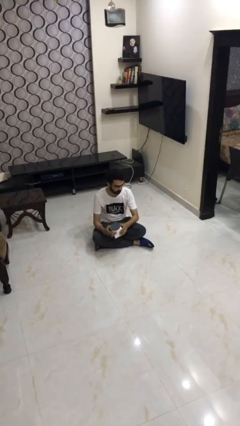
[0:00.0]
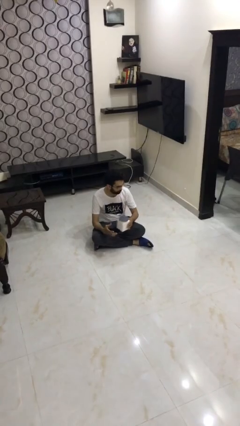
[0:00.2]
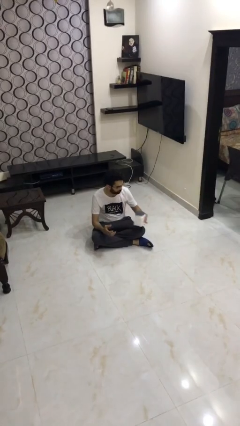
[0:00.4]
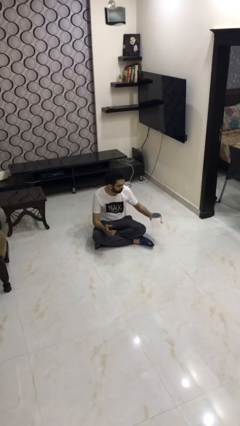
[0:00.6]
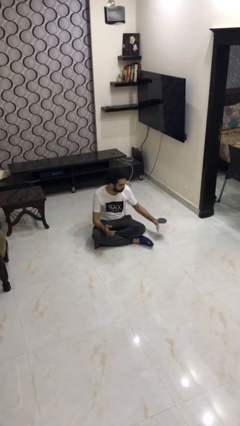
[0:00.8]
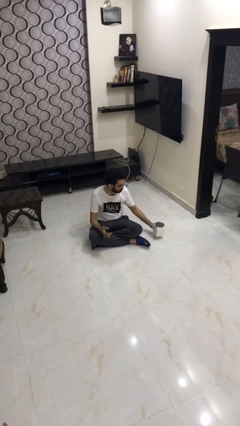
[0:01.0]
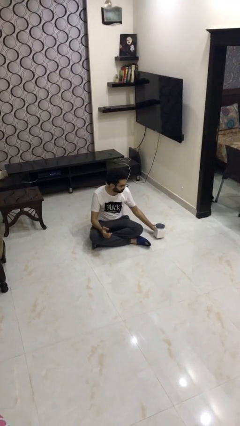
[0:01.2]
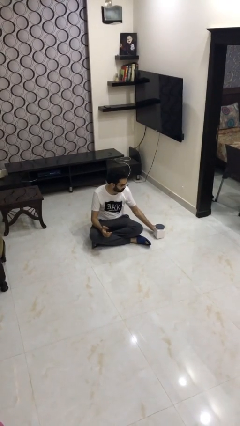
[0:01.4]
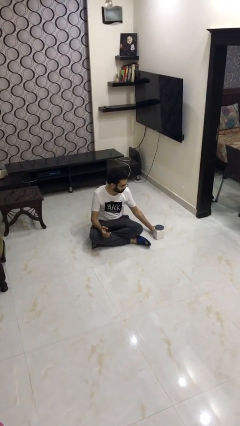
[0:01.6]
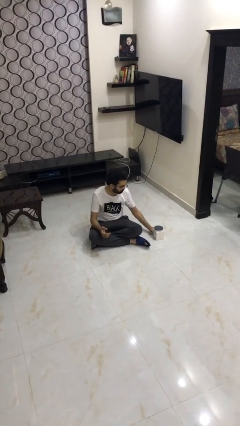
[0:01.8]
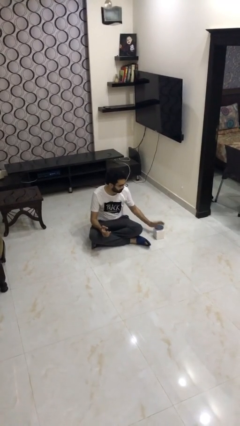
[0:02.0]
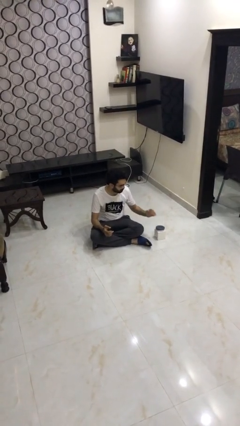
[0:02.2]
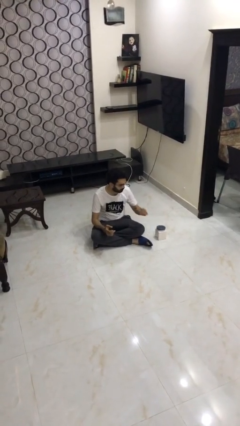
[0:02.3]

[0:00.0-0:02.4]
person puts down object on floor

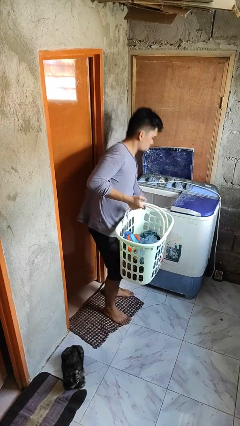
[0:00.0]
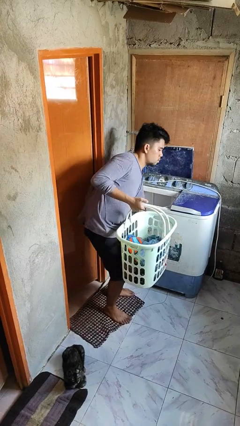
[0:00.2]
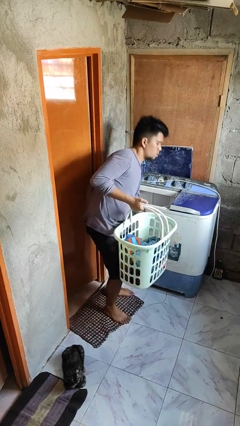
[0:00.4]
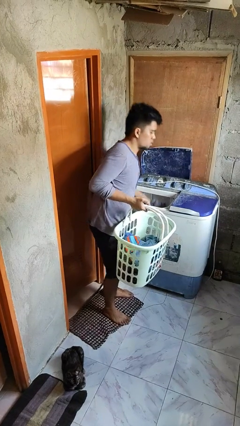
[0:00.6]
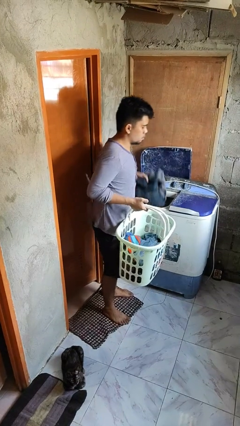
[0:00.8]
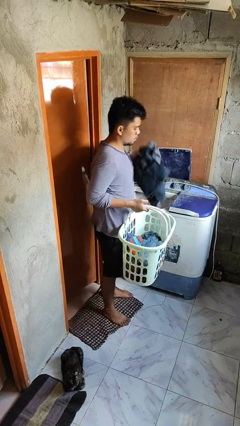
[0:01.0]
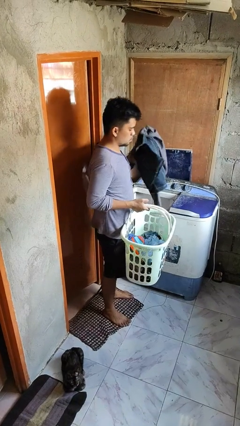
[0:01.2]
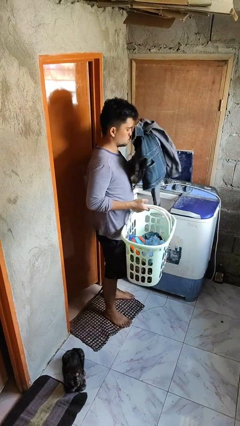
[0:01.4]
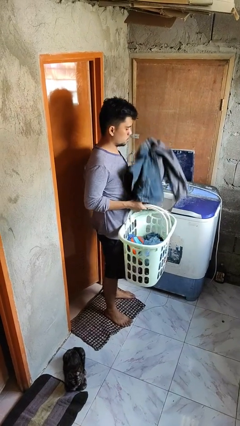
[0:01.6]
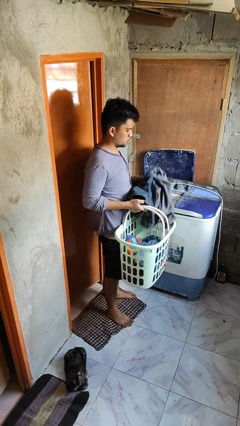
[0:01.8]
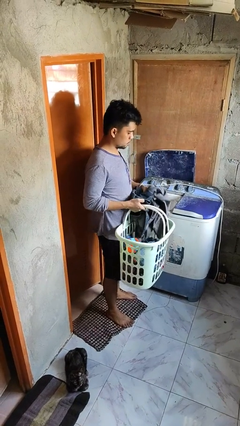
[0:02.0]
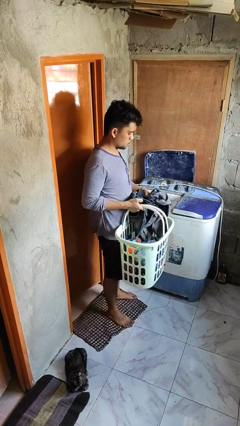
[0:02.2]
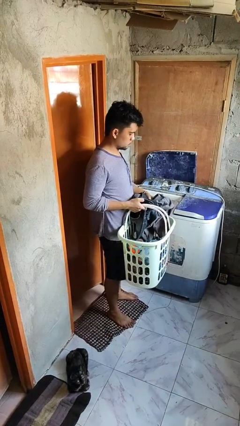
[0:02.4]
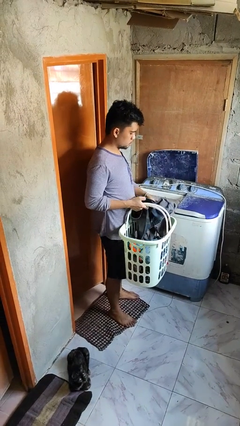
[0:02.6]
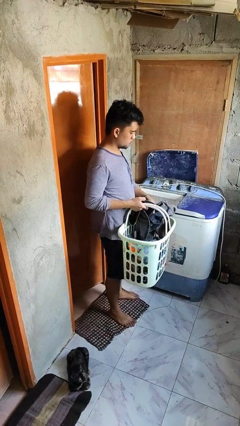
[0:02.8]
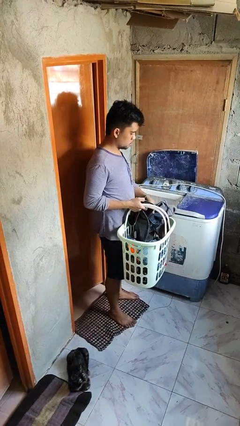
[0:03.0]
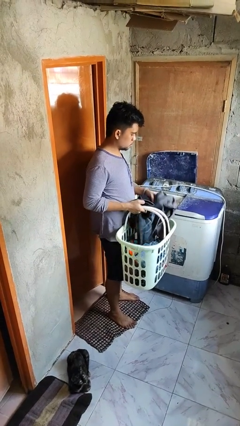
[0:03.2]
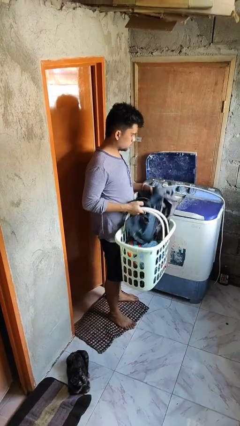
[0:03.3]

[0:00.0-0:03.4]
person unloads clotheswasher

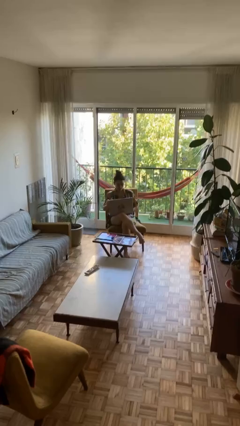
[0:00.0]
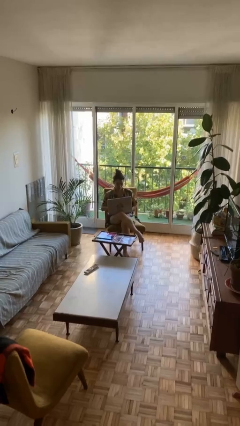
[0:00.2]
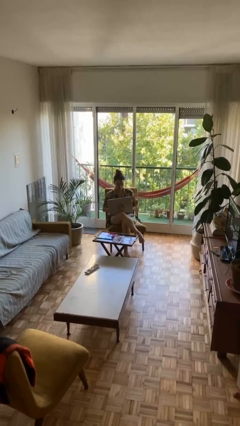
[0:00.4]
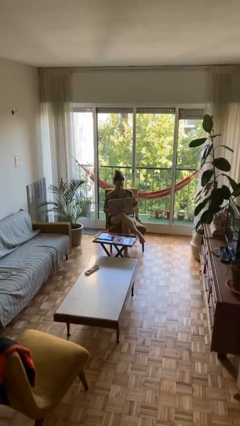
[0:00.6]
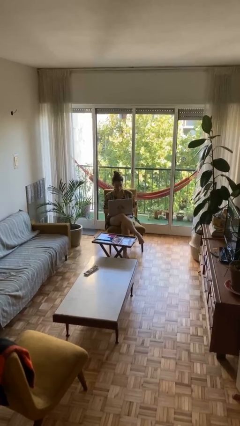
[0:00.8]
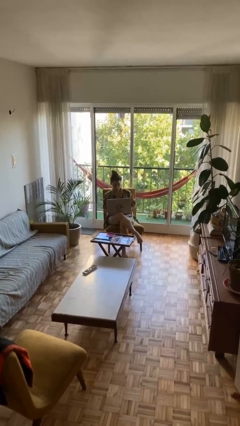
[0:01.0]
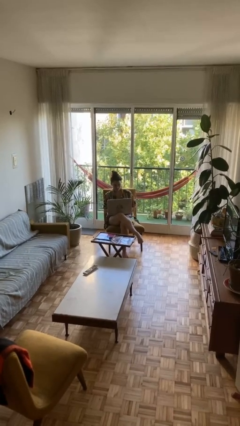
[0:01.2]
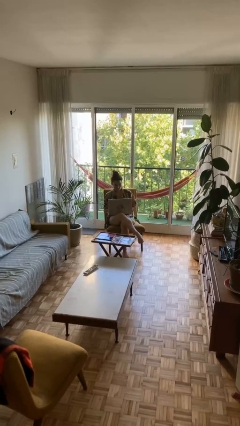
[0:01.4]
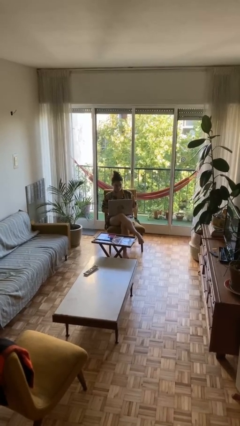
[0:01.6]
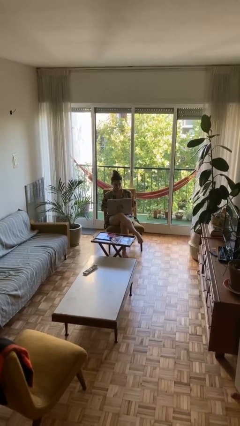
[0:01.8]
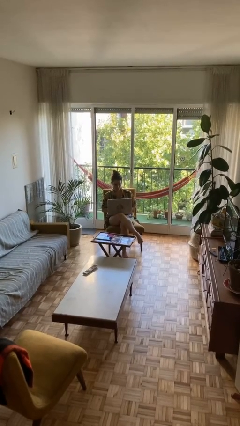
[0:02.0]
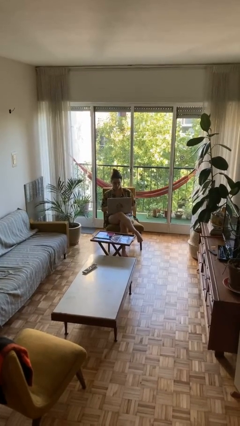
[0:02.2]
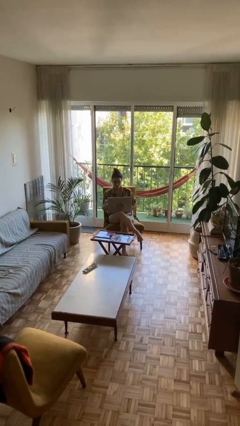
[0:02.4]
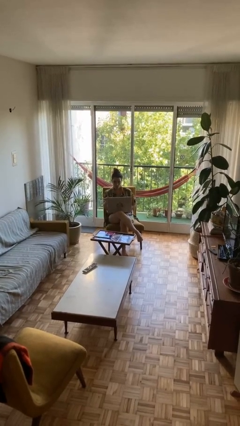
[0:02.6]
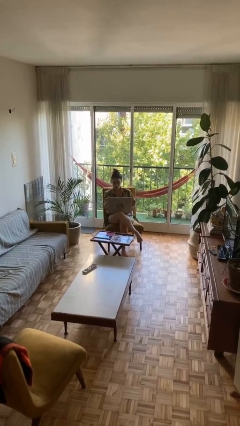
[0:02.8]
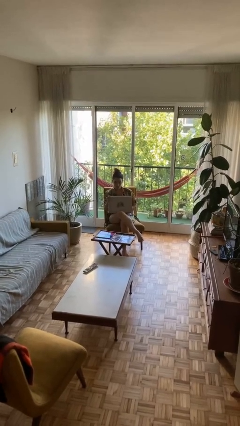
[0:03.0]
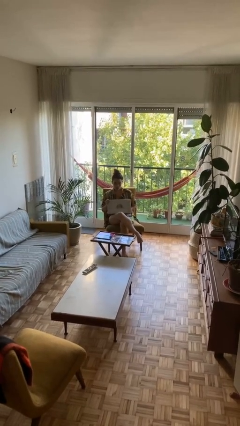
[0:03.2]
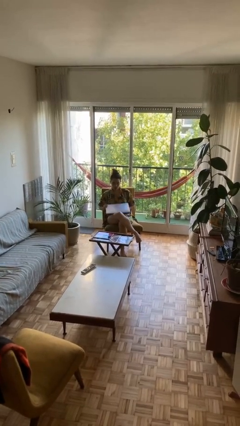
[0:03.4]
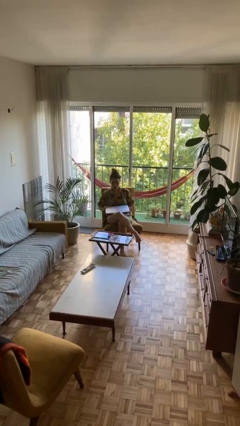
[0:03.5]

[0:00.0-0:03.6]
person interacts with laptop

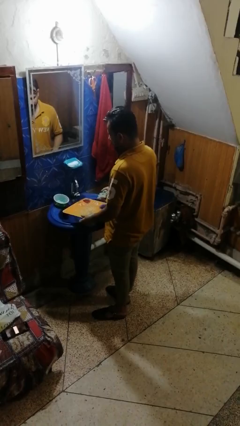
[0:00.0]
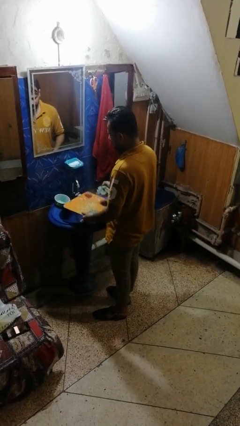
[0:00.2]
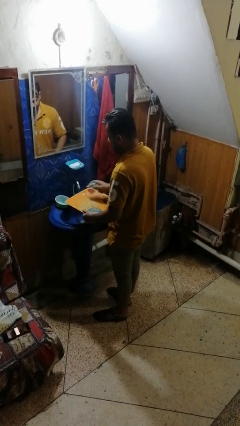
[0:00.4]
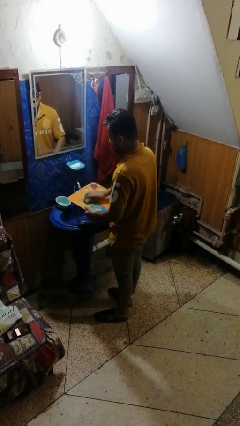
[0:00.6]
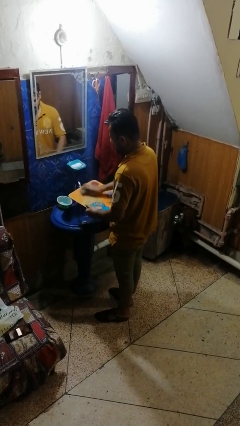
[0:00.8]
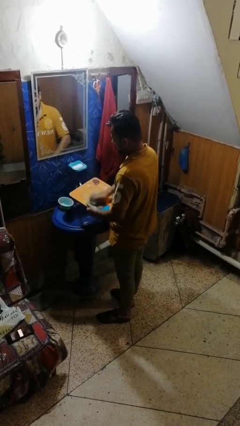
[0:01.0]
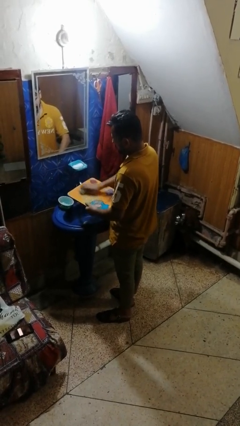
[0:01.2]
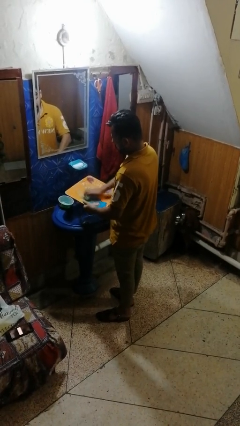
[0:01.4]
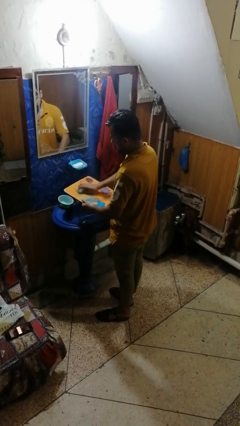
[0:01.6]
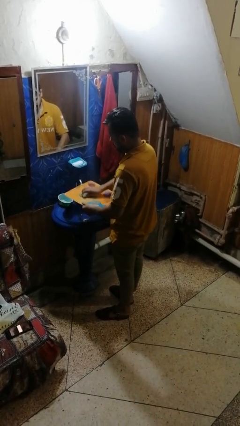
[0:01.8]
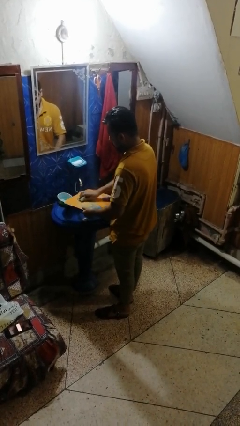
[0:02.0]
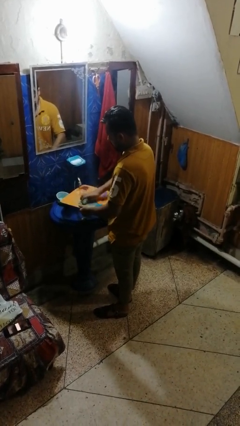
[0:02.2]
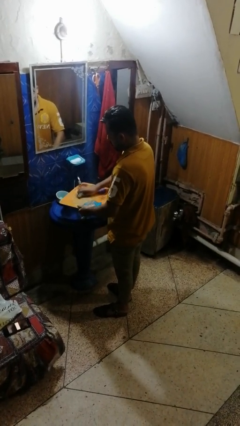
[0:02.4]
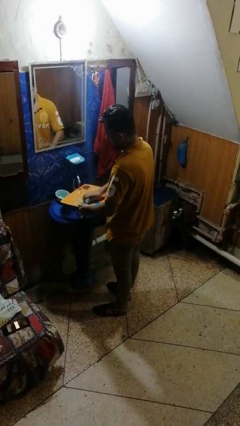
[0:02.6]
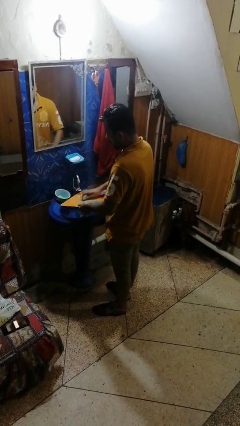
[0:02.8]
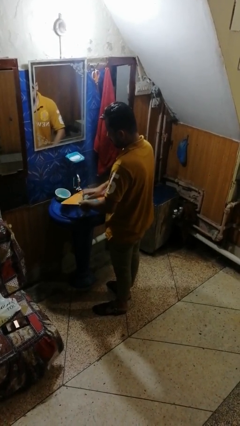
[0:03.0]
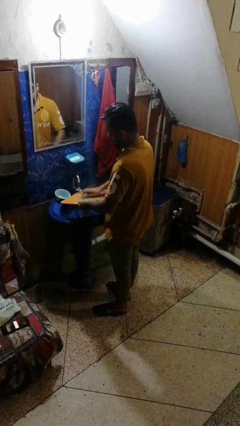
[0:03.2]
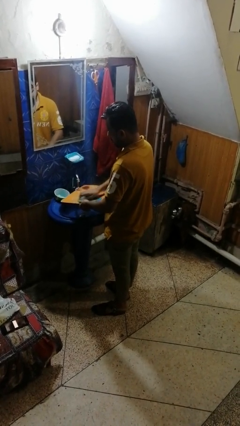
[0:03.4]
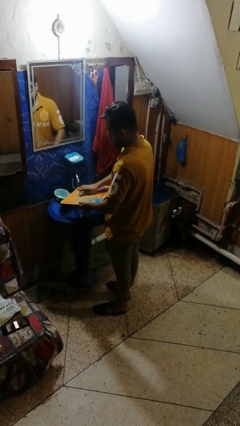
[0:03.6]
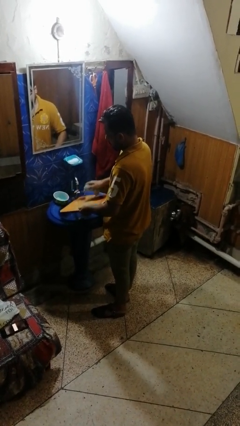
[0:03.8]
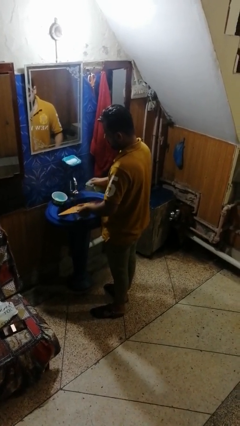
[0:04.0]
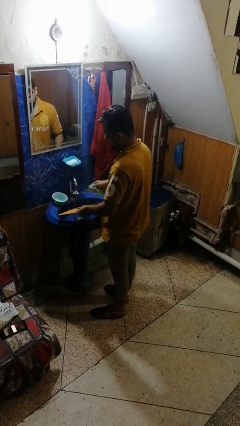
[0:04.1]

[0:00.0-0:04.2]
person washes dish

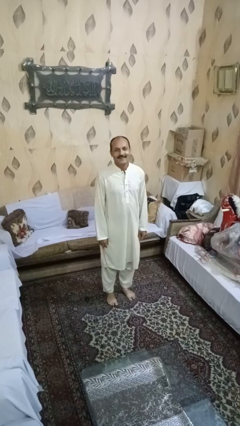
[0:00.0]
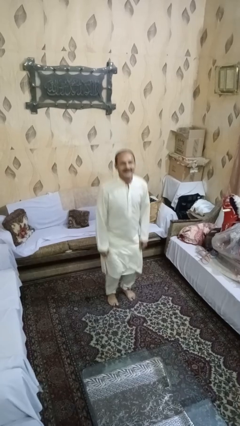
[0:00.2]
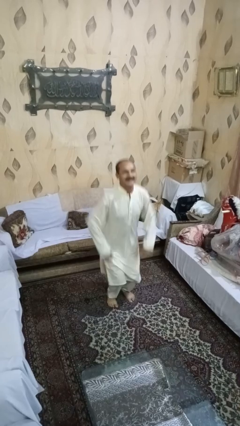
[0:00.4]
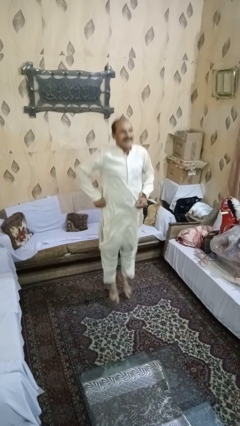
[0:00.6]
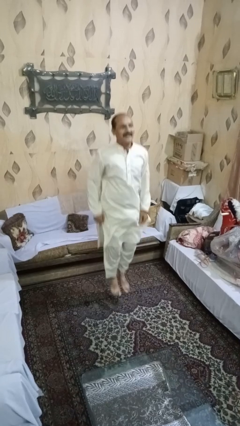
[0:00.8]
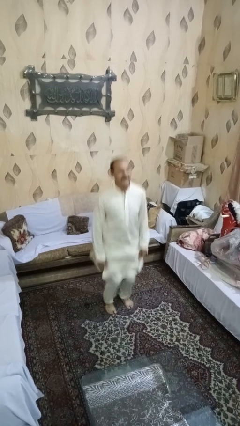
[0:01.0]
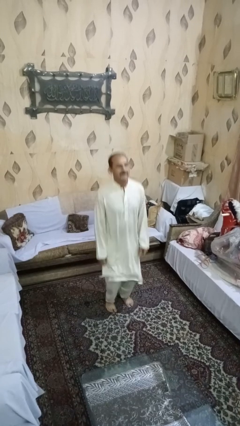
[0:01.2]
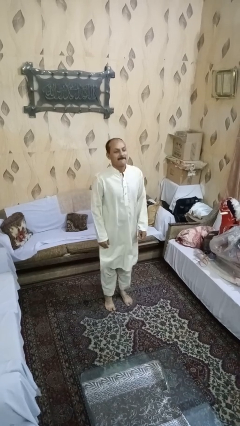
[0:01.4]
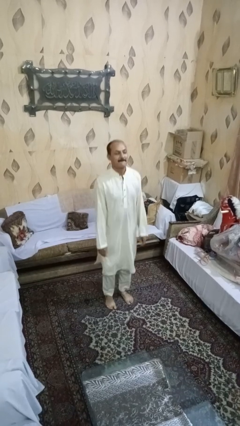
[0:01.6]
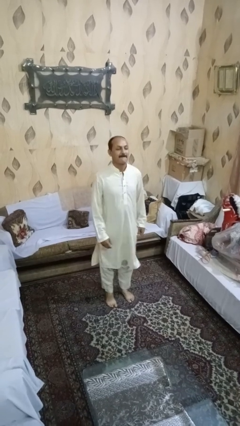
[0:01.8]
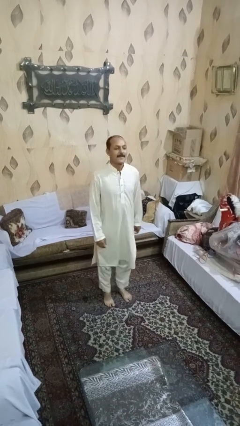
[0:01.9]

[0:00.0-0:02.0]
person jumps

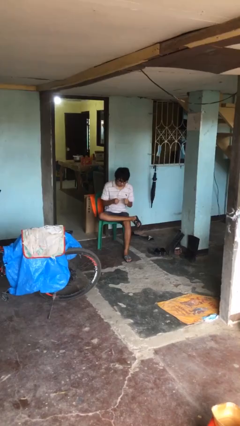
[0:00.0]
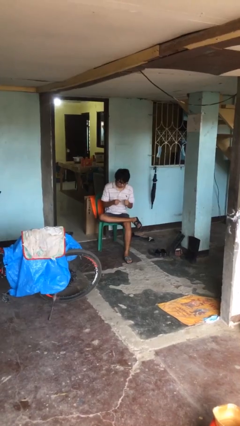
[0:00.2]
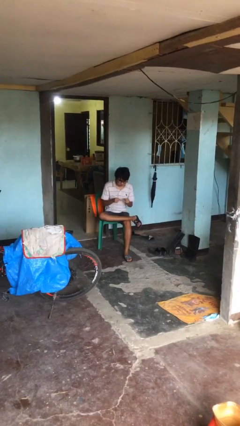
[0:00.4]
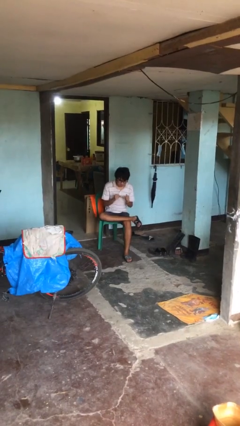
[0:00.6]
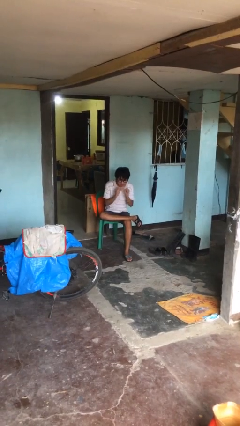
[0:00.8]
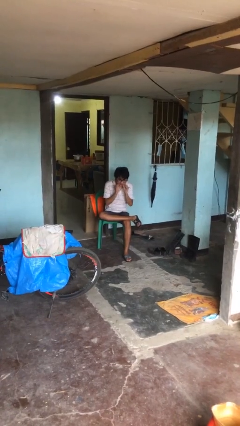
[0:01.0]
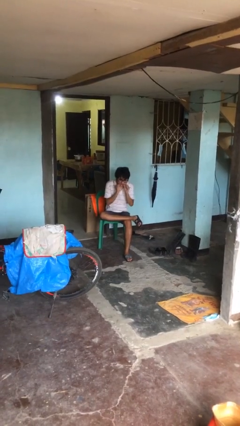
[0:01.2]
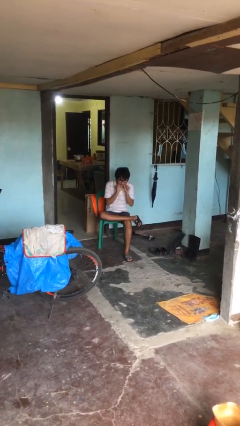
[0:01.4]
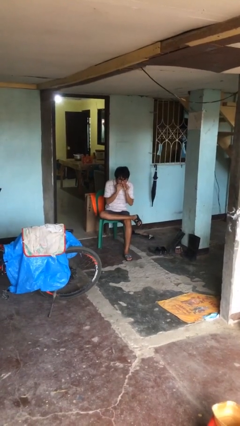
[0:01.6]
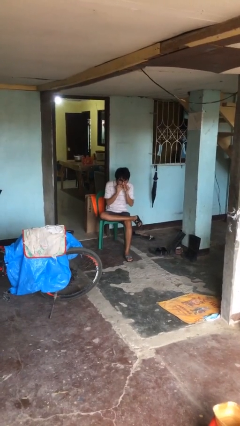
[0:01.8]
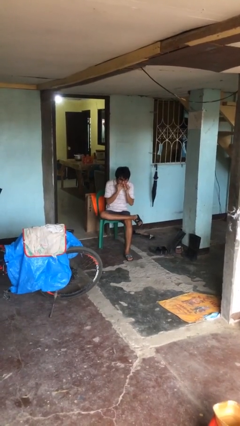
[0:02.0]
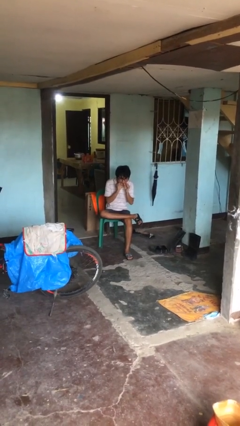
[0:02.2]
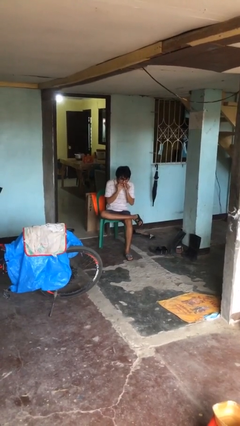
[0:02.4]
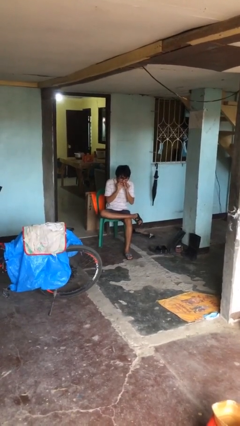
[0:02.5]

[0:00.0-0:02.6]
person flosses
